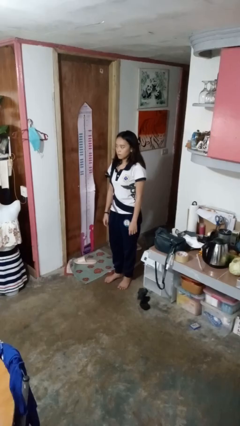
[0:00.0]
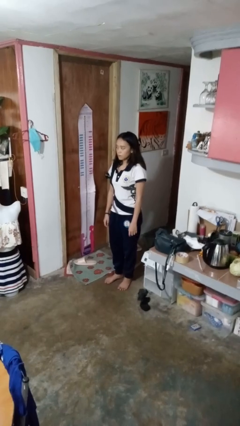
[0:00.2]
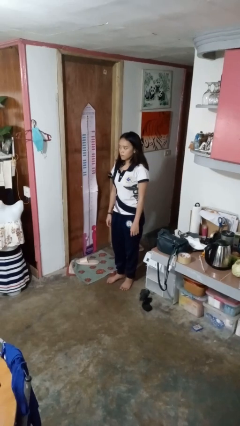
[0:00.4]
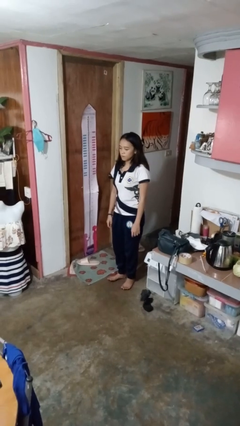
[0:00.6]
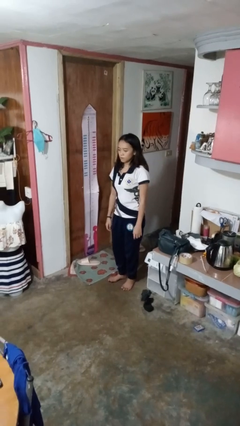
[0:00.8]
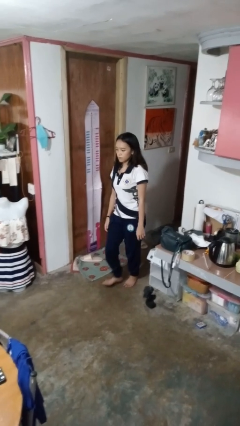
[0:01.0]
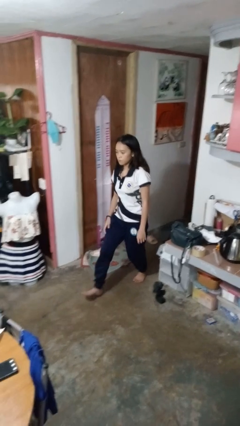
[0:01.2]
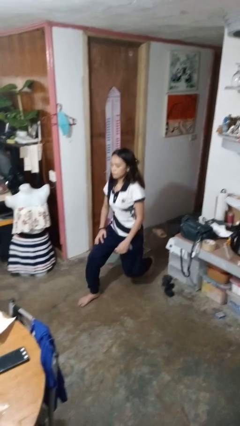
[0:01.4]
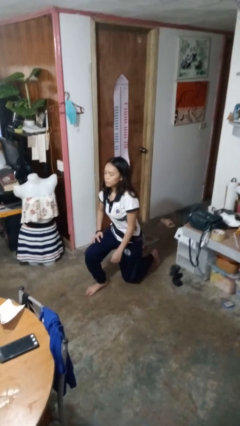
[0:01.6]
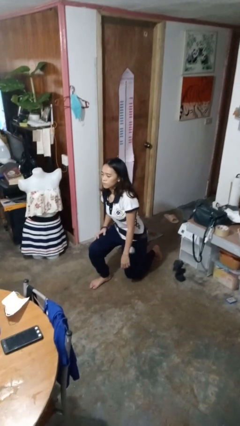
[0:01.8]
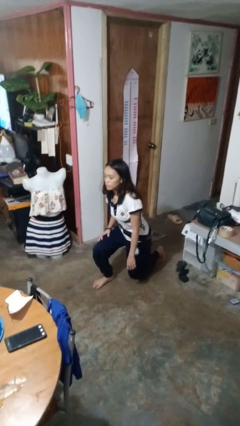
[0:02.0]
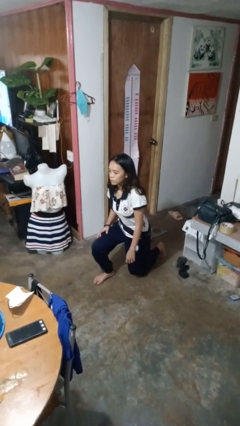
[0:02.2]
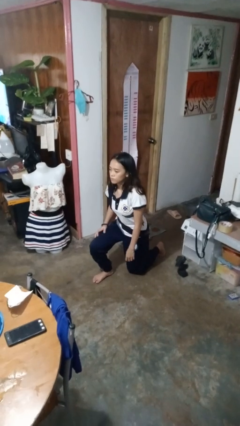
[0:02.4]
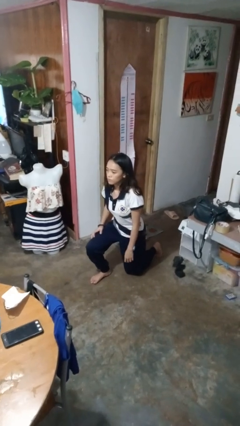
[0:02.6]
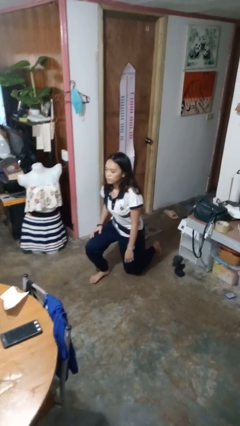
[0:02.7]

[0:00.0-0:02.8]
person kneels

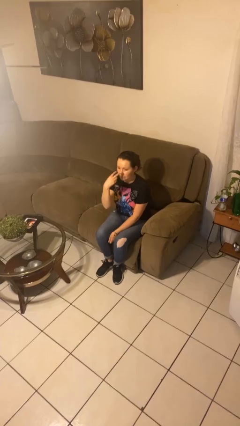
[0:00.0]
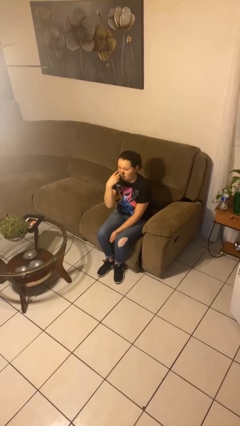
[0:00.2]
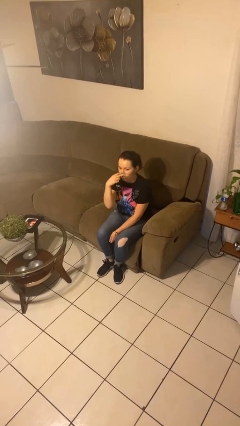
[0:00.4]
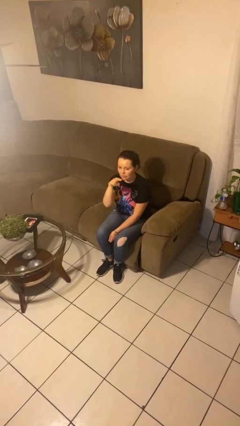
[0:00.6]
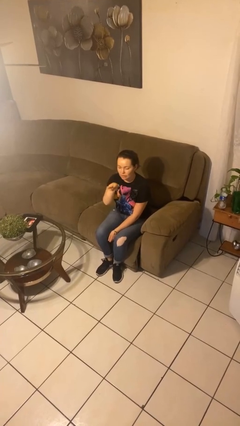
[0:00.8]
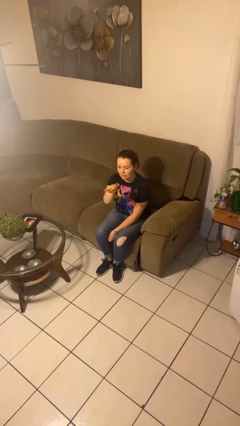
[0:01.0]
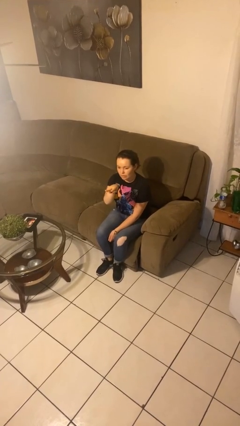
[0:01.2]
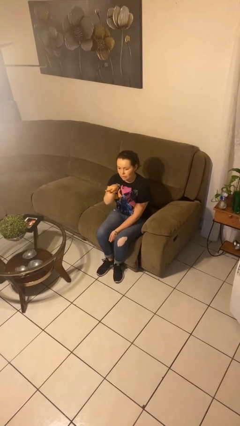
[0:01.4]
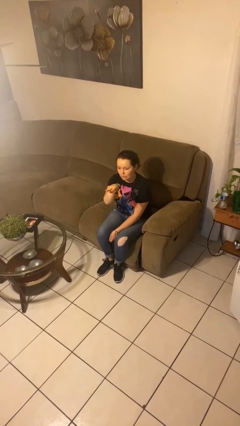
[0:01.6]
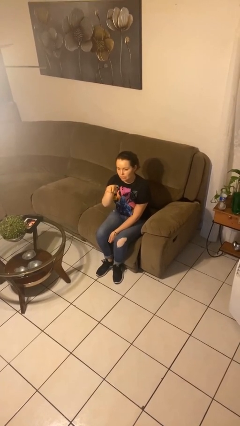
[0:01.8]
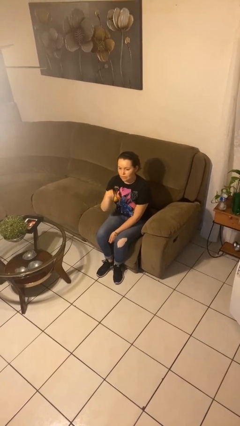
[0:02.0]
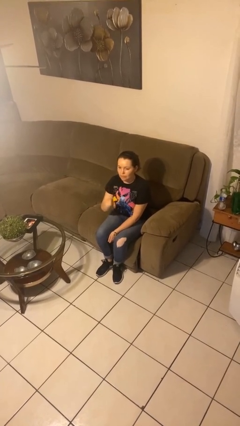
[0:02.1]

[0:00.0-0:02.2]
person gestures watch closely

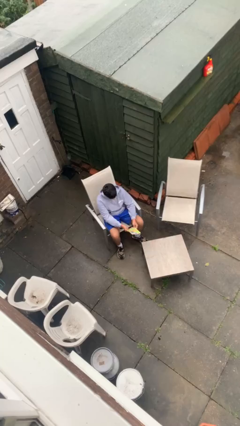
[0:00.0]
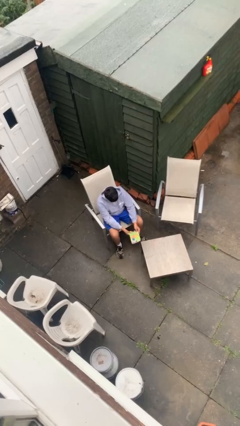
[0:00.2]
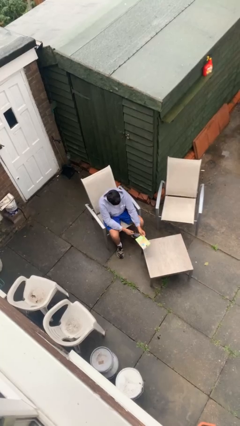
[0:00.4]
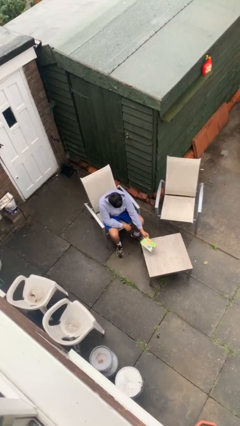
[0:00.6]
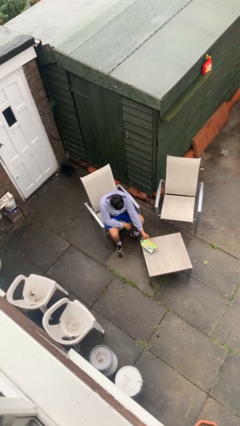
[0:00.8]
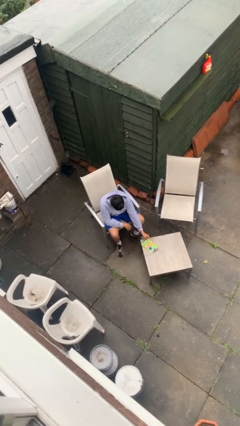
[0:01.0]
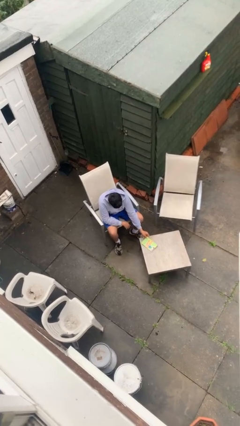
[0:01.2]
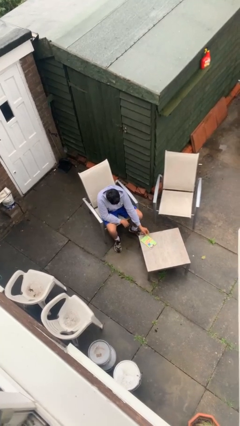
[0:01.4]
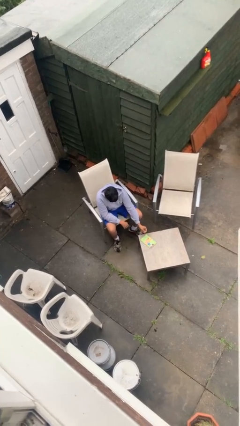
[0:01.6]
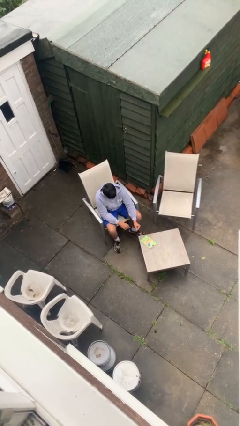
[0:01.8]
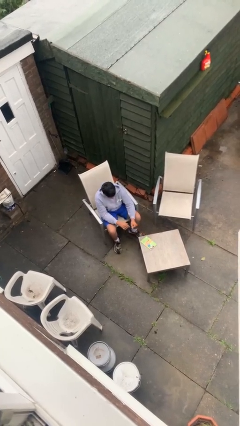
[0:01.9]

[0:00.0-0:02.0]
person puts down object on table

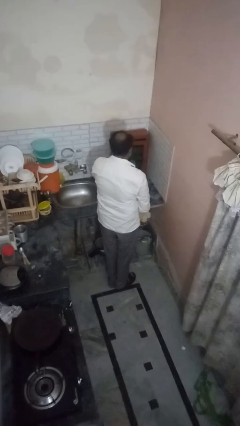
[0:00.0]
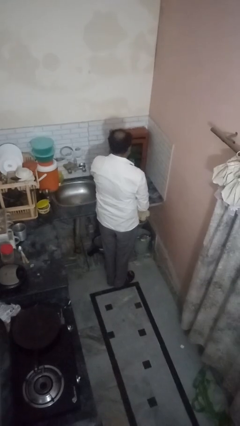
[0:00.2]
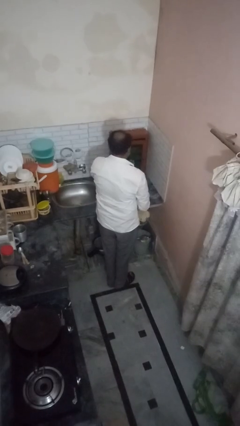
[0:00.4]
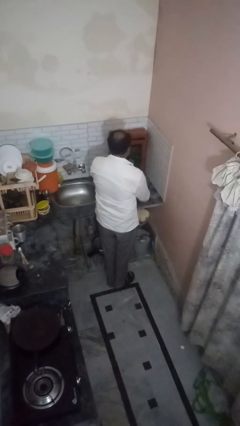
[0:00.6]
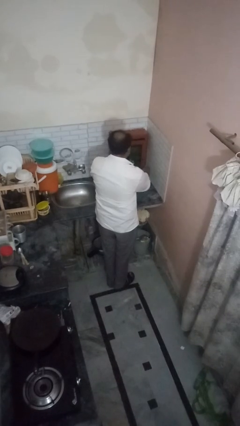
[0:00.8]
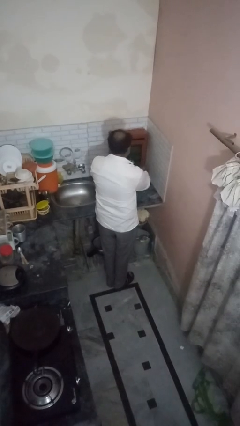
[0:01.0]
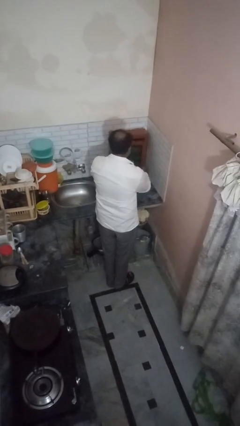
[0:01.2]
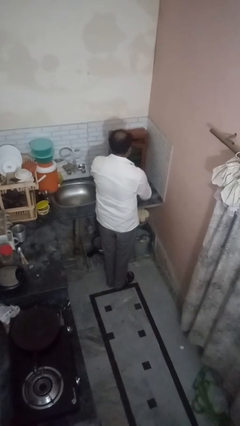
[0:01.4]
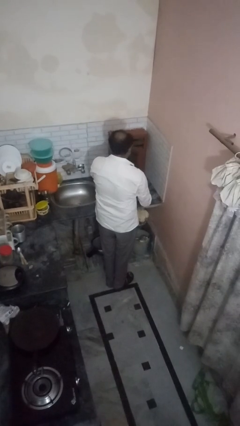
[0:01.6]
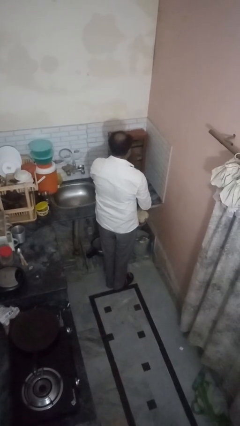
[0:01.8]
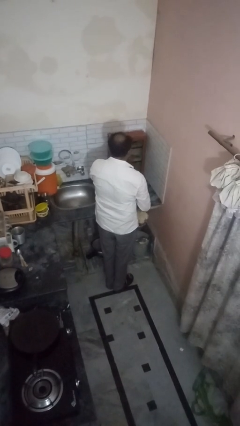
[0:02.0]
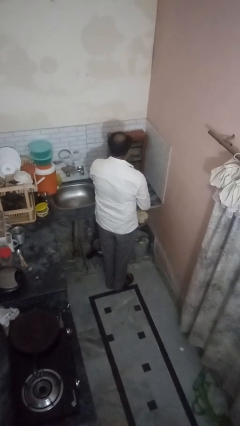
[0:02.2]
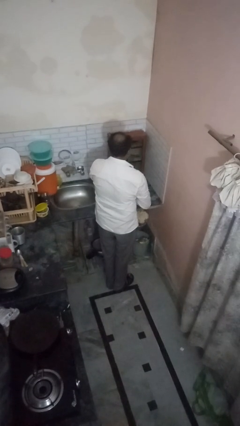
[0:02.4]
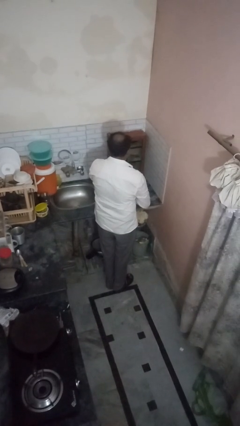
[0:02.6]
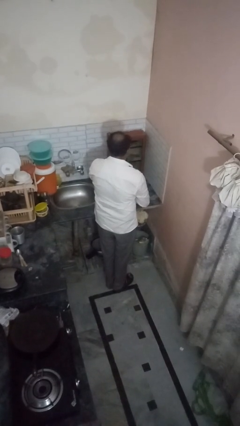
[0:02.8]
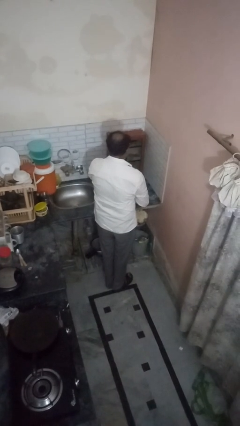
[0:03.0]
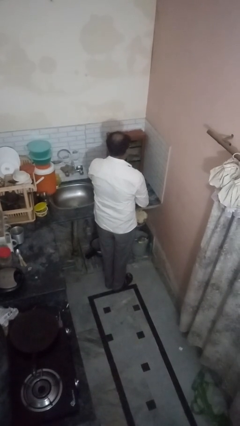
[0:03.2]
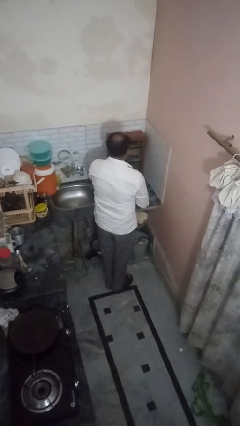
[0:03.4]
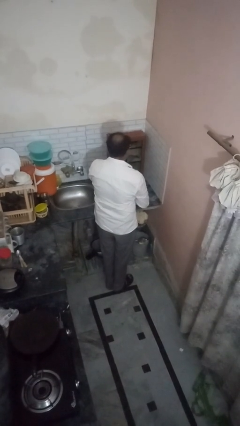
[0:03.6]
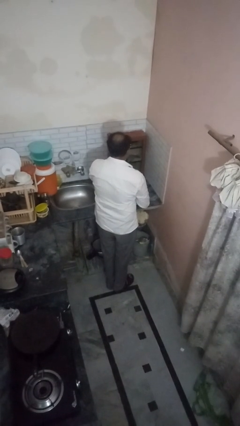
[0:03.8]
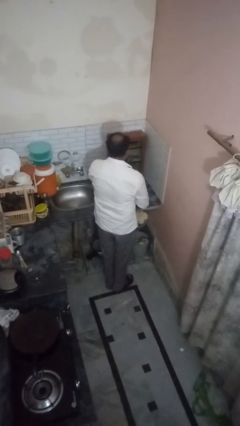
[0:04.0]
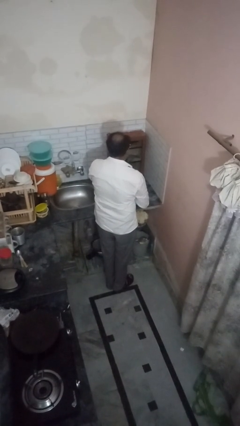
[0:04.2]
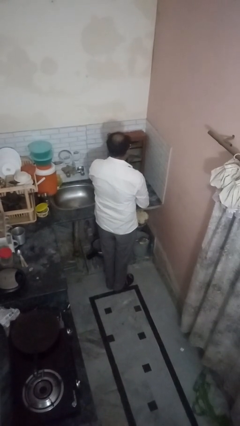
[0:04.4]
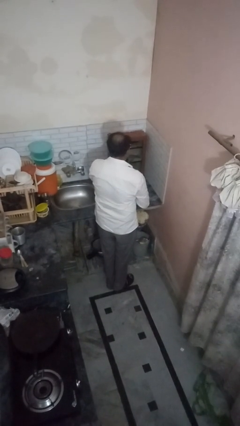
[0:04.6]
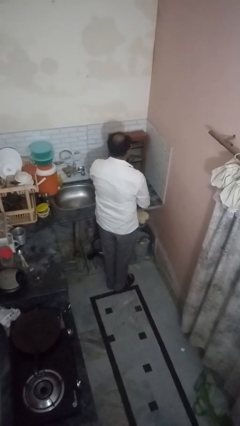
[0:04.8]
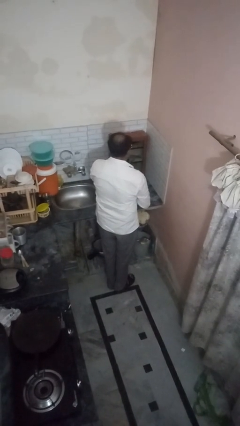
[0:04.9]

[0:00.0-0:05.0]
person opens kitchen drawer

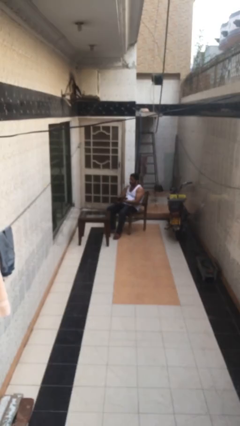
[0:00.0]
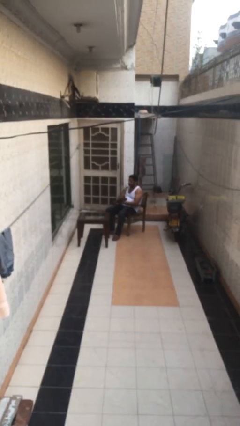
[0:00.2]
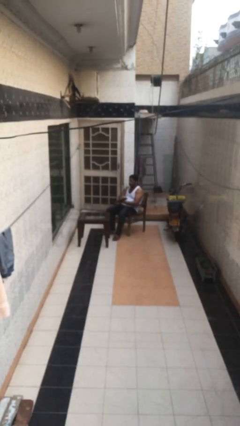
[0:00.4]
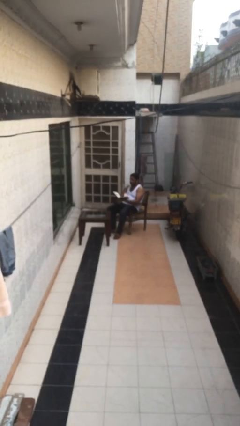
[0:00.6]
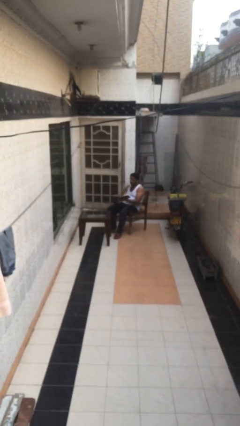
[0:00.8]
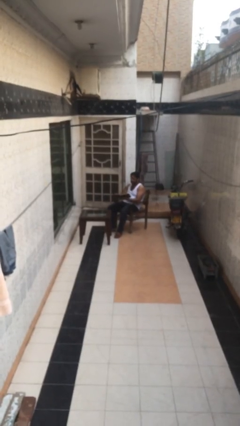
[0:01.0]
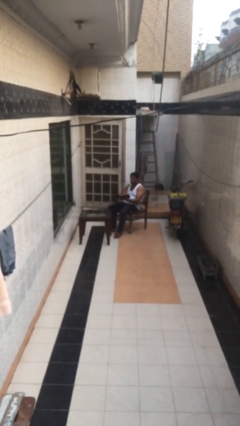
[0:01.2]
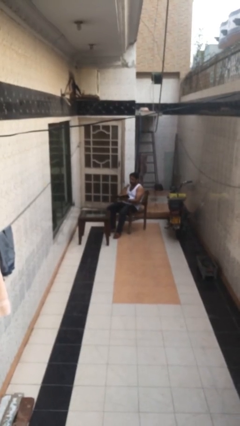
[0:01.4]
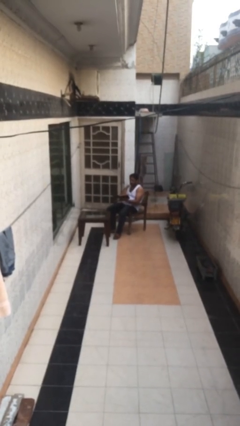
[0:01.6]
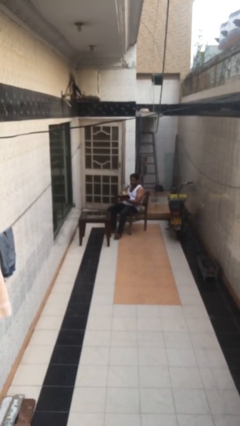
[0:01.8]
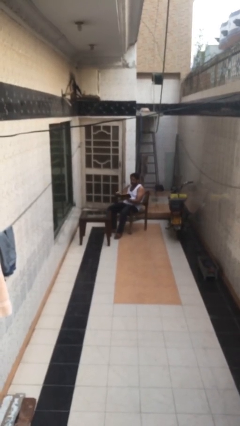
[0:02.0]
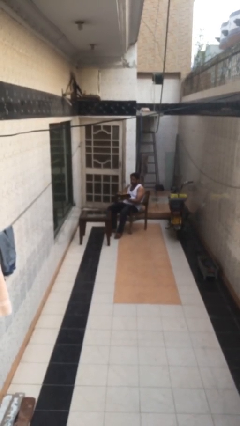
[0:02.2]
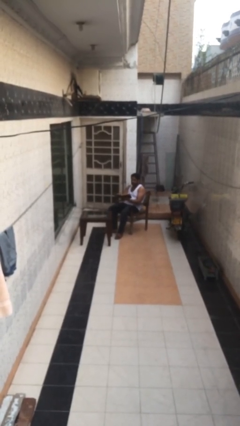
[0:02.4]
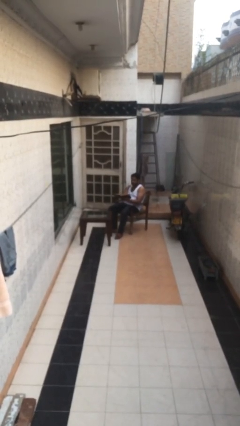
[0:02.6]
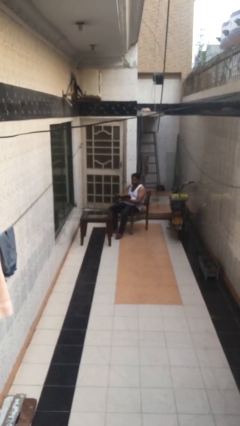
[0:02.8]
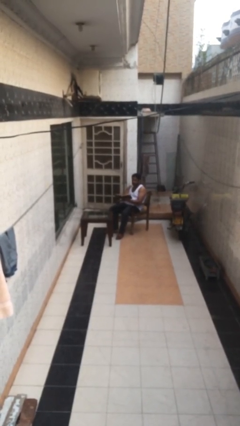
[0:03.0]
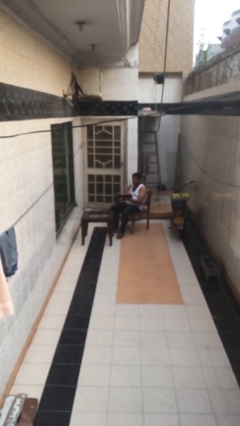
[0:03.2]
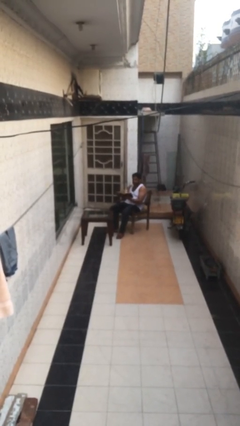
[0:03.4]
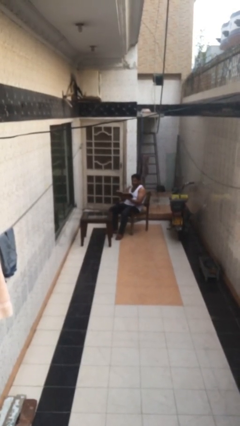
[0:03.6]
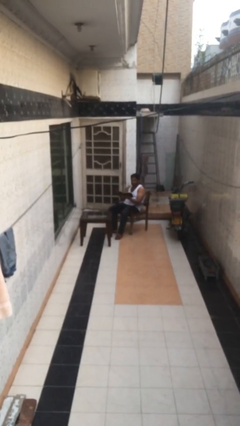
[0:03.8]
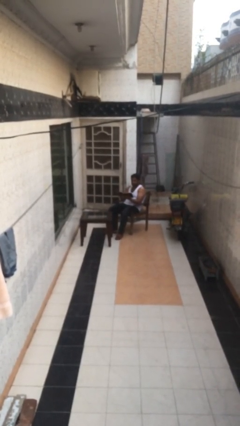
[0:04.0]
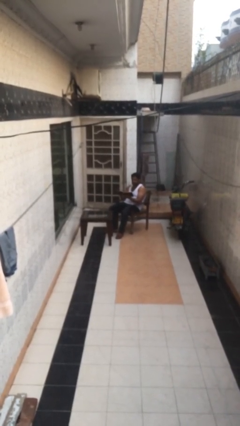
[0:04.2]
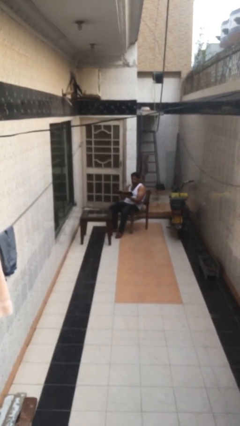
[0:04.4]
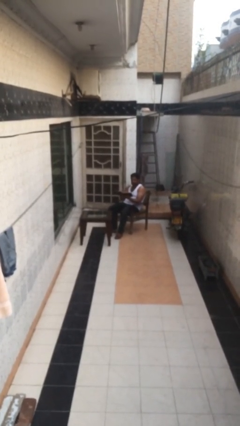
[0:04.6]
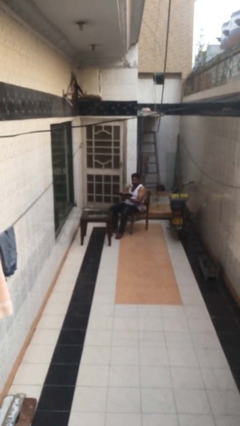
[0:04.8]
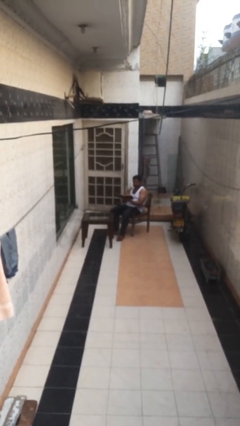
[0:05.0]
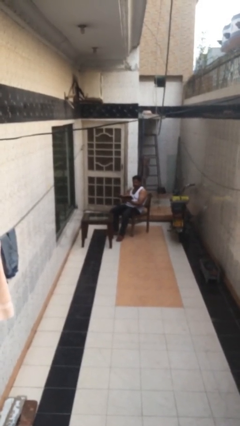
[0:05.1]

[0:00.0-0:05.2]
person reads document

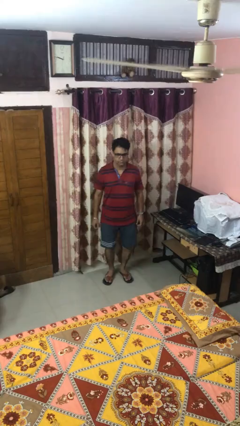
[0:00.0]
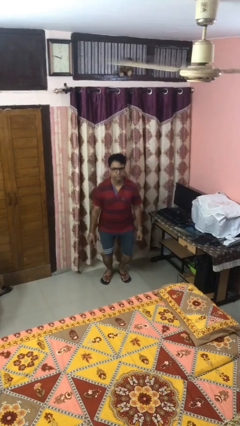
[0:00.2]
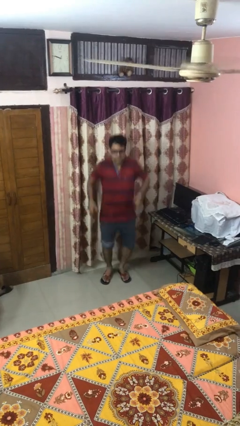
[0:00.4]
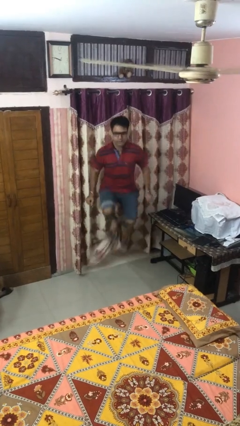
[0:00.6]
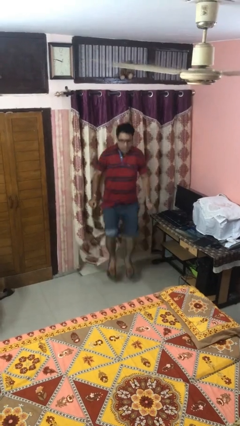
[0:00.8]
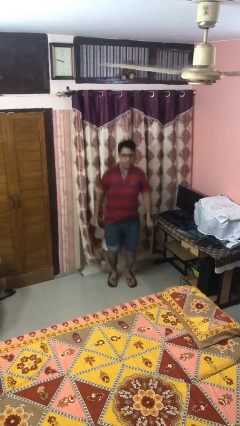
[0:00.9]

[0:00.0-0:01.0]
person jumps
